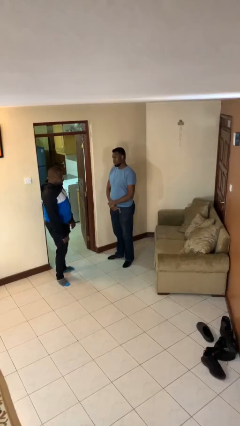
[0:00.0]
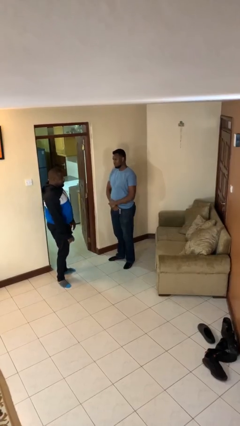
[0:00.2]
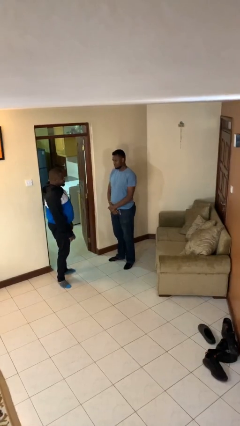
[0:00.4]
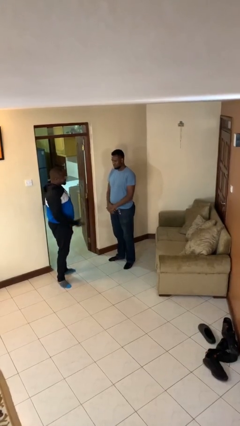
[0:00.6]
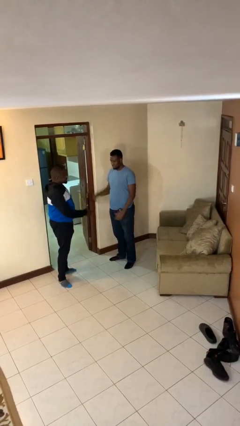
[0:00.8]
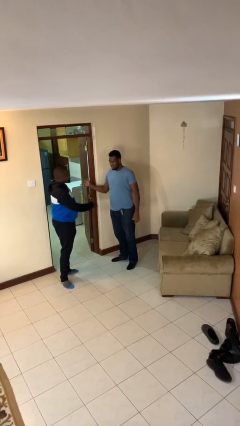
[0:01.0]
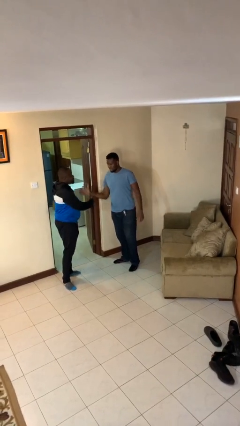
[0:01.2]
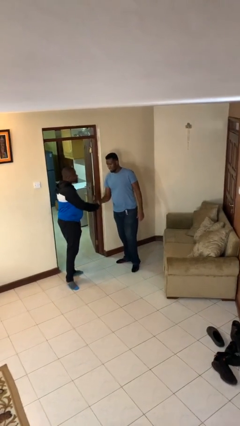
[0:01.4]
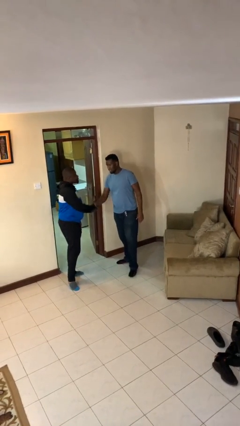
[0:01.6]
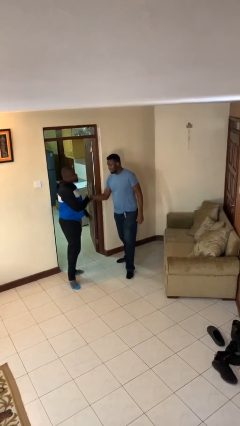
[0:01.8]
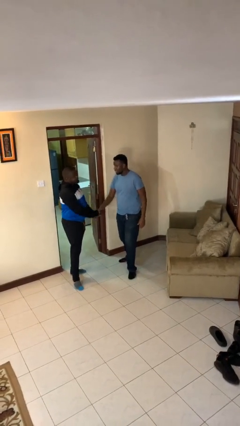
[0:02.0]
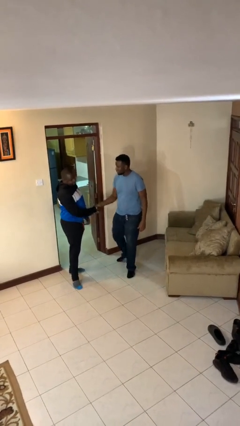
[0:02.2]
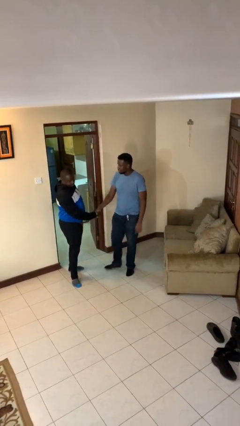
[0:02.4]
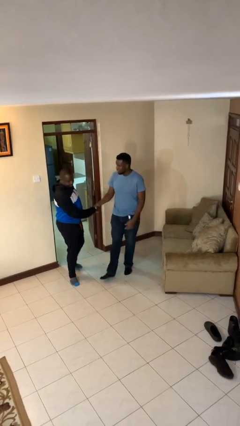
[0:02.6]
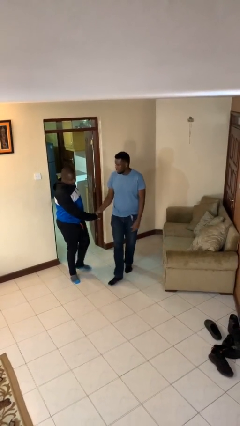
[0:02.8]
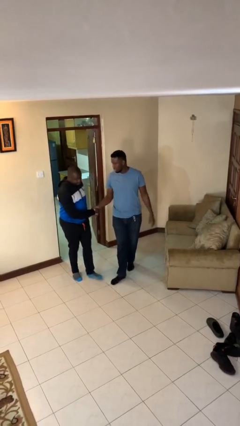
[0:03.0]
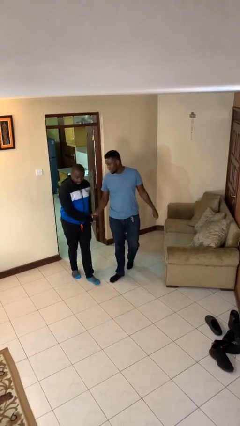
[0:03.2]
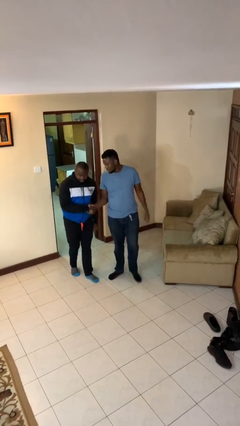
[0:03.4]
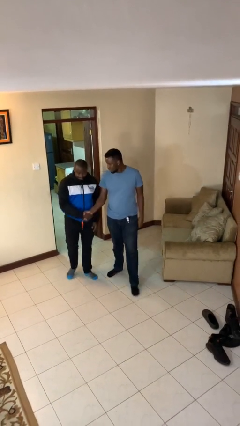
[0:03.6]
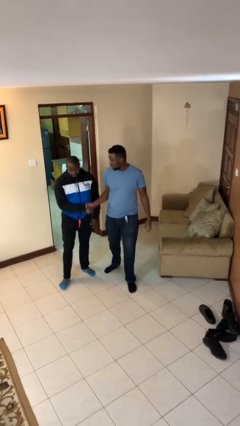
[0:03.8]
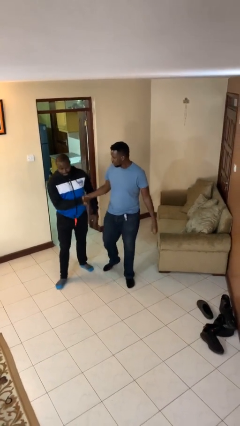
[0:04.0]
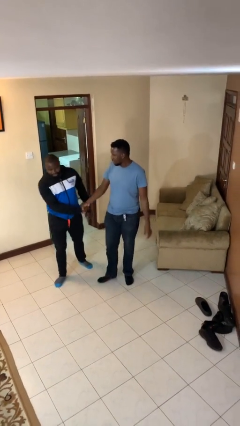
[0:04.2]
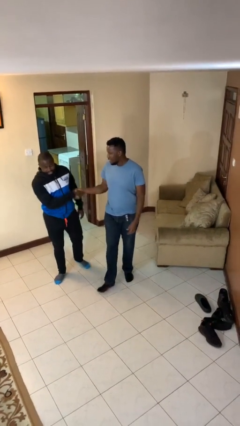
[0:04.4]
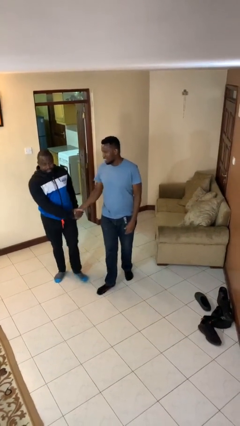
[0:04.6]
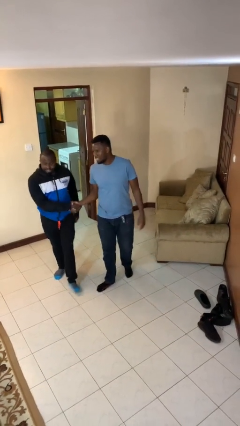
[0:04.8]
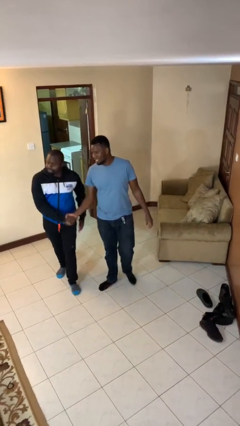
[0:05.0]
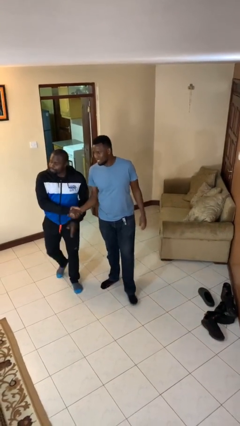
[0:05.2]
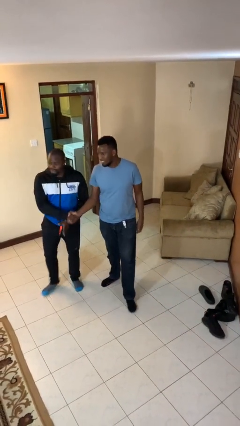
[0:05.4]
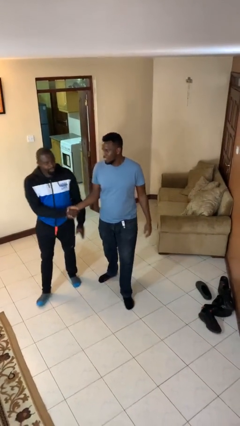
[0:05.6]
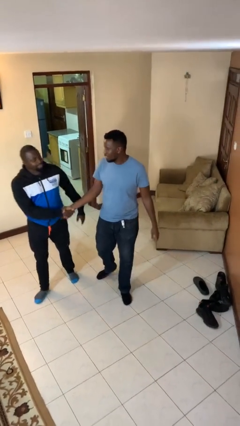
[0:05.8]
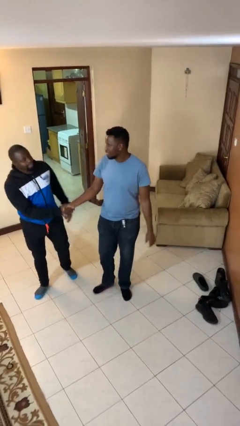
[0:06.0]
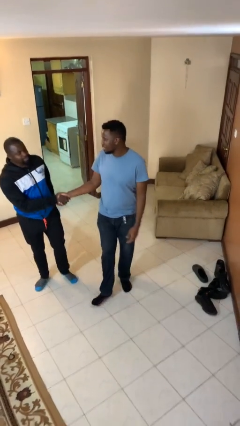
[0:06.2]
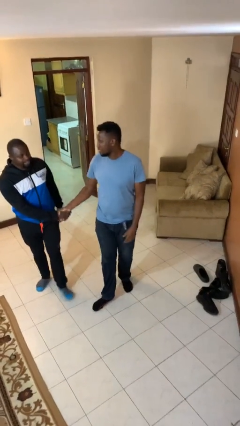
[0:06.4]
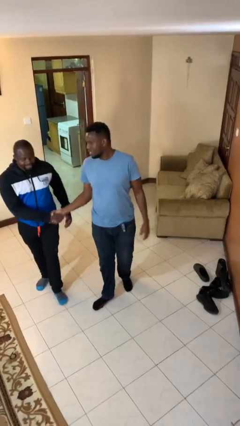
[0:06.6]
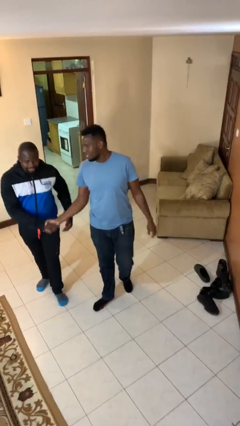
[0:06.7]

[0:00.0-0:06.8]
person holds hand

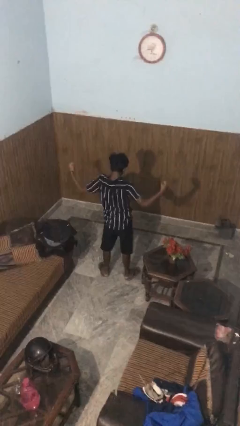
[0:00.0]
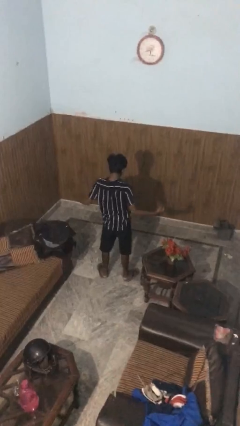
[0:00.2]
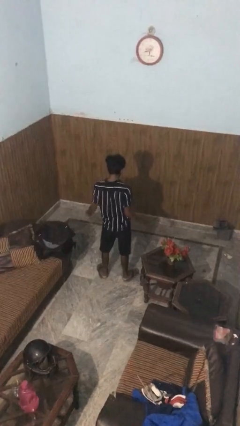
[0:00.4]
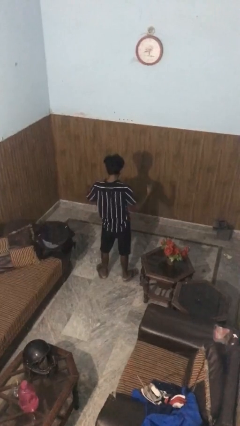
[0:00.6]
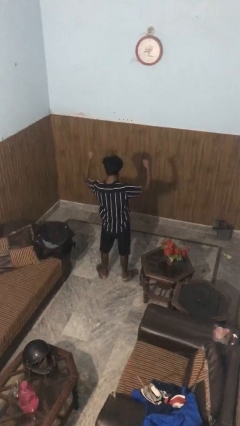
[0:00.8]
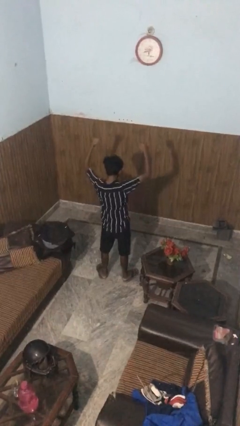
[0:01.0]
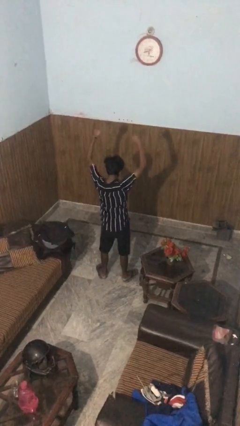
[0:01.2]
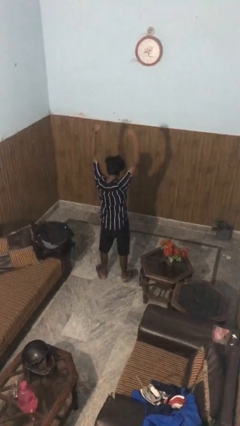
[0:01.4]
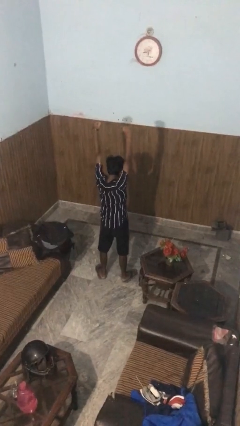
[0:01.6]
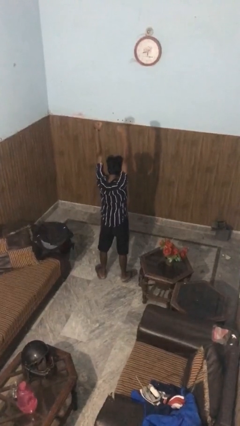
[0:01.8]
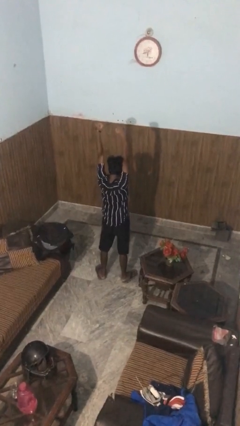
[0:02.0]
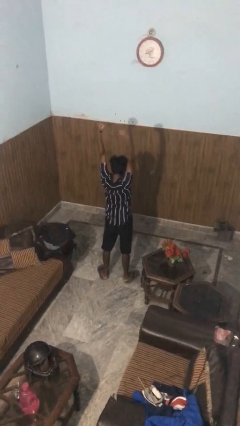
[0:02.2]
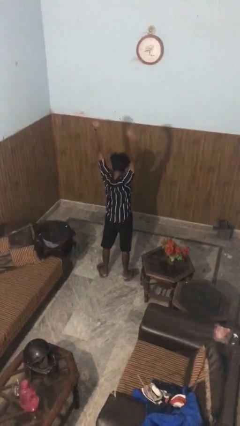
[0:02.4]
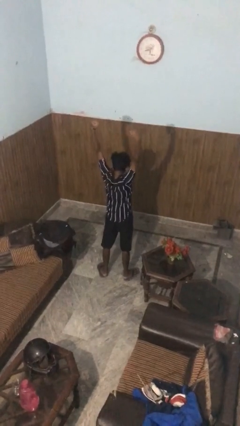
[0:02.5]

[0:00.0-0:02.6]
person stretches arms over head

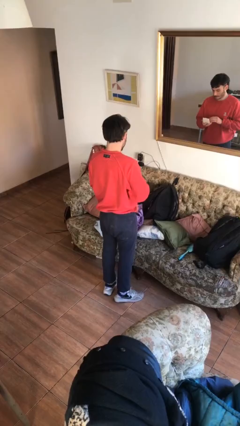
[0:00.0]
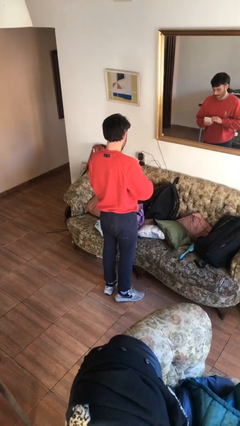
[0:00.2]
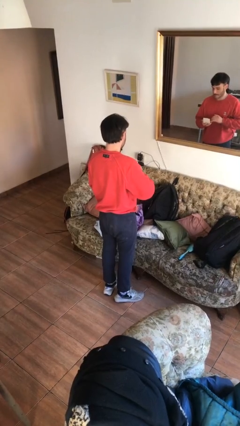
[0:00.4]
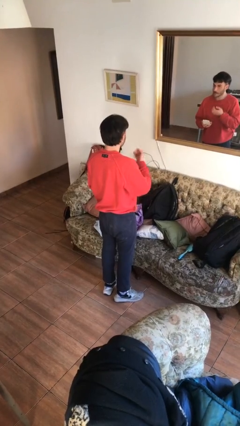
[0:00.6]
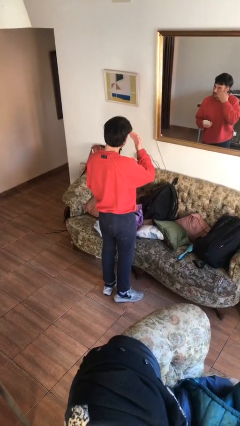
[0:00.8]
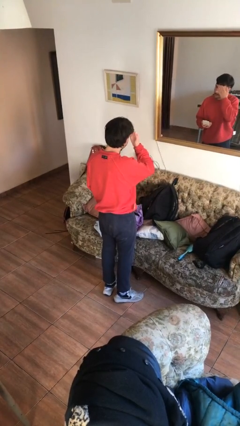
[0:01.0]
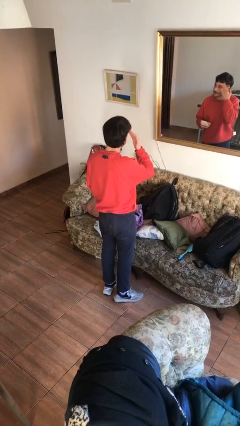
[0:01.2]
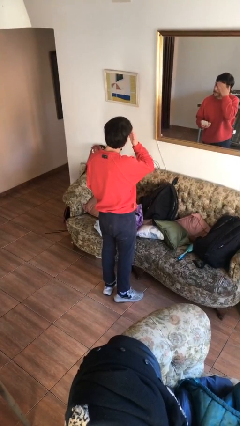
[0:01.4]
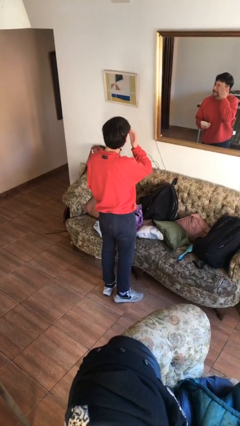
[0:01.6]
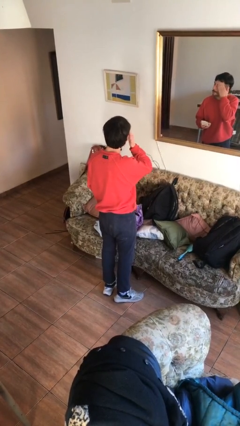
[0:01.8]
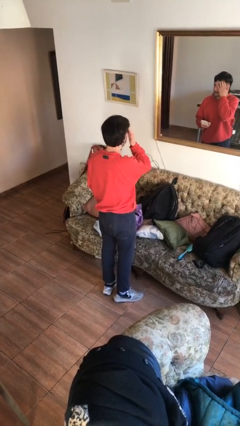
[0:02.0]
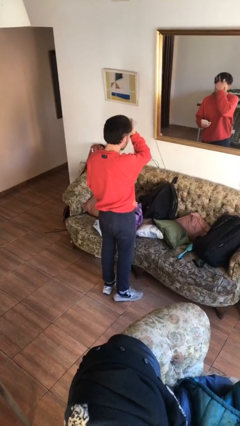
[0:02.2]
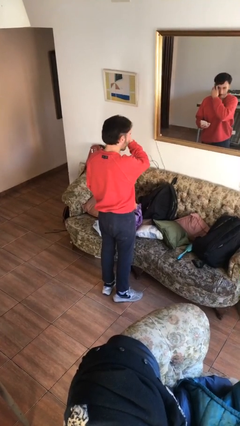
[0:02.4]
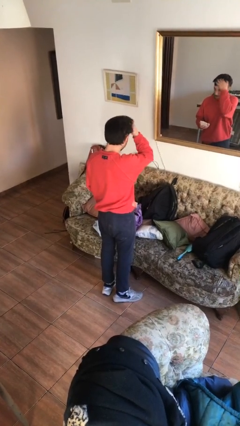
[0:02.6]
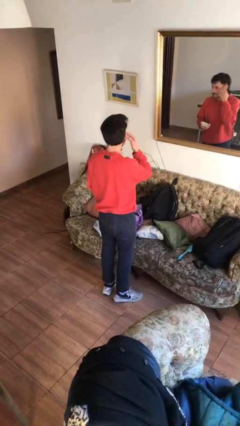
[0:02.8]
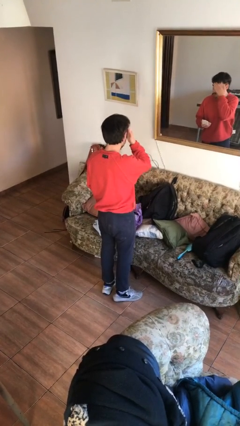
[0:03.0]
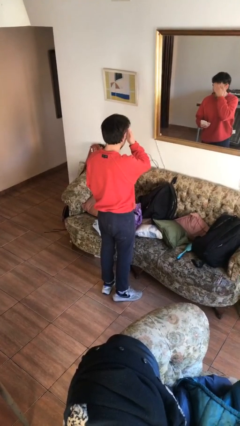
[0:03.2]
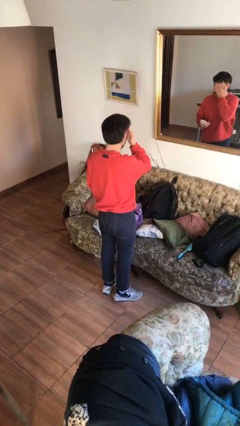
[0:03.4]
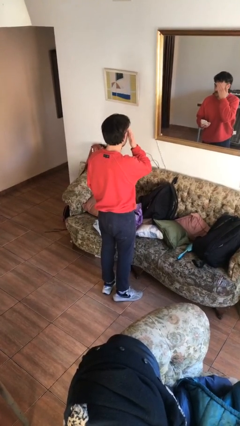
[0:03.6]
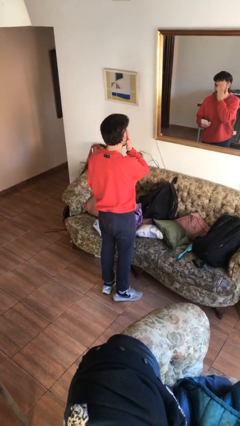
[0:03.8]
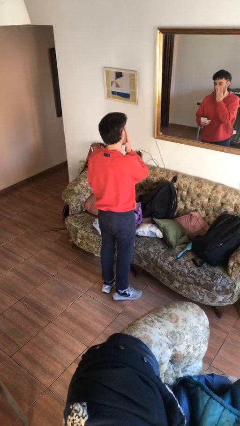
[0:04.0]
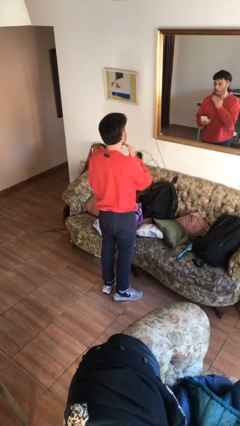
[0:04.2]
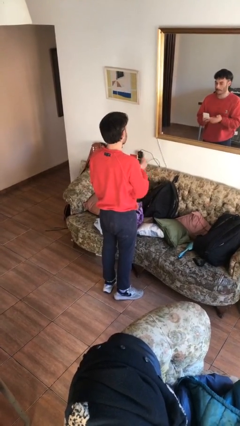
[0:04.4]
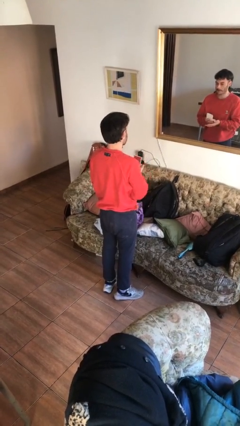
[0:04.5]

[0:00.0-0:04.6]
person applies foundation makeup

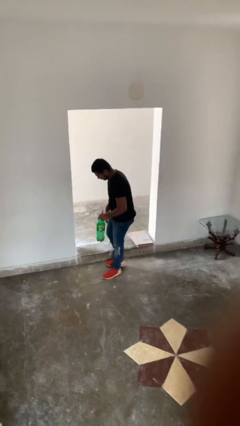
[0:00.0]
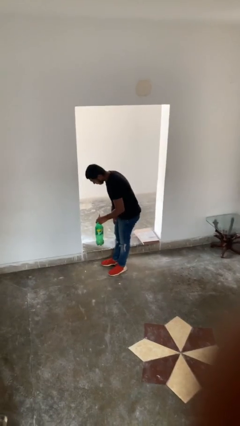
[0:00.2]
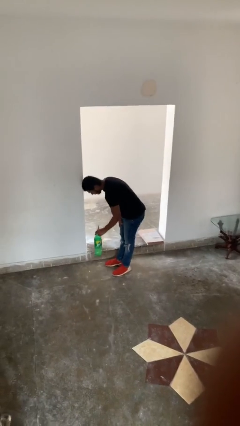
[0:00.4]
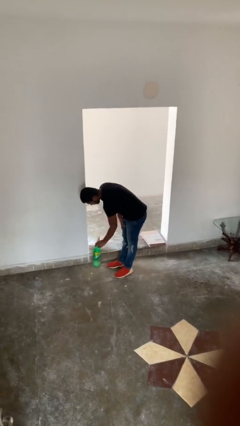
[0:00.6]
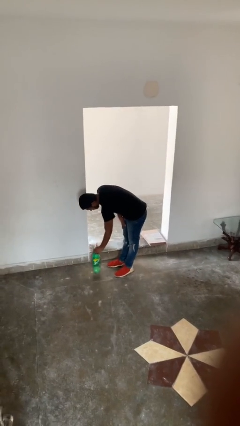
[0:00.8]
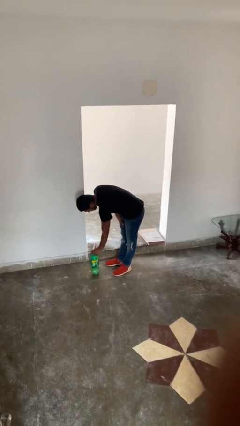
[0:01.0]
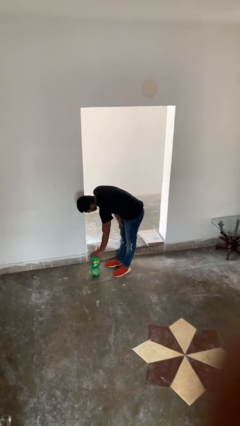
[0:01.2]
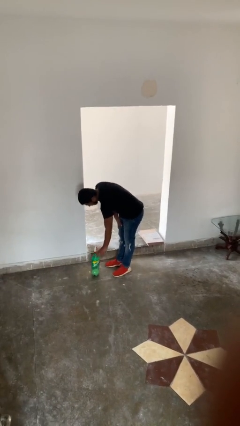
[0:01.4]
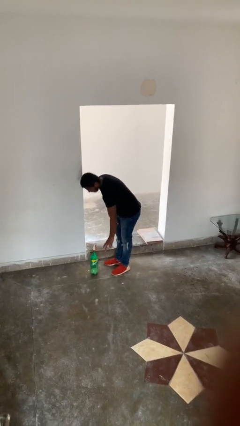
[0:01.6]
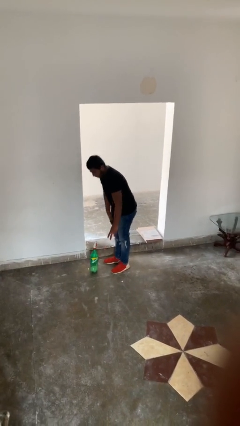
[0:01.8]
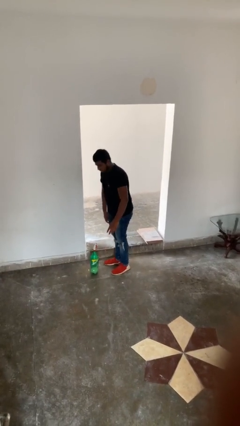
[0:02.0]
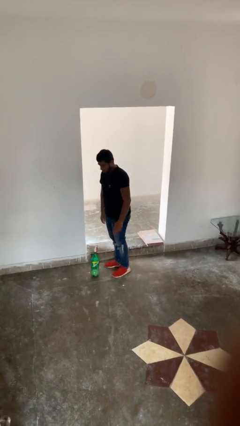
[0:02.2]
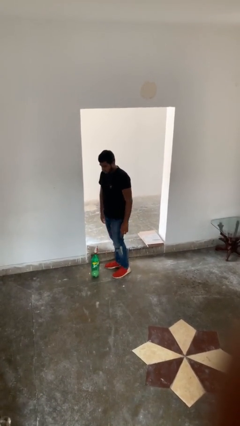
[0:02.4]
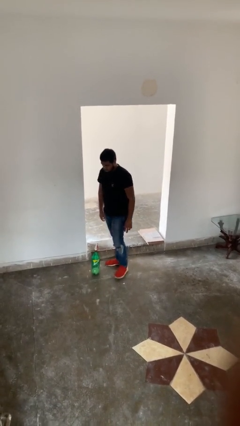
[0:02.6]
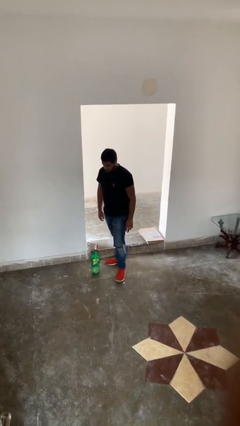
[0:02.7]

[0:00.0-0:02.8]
person puts down object on floor

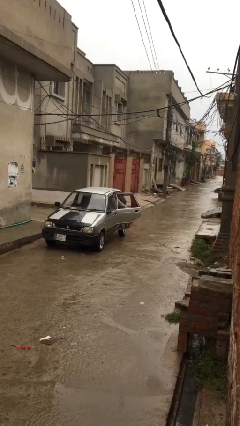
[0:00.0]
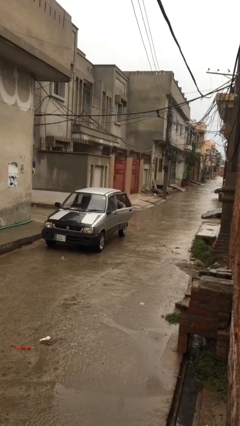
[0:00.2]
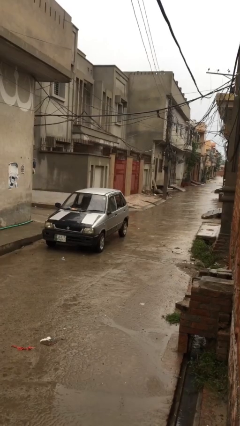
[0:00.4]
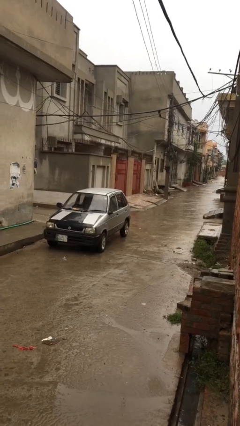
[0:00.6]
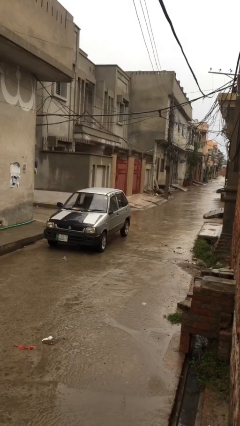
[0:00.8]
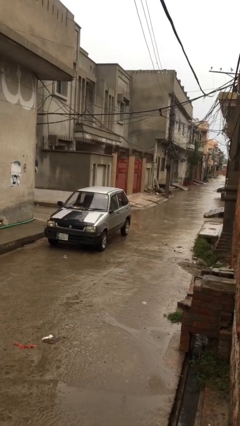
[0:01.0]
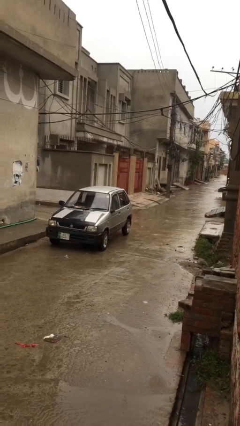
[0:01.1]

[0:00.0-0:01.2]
person closes car door
